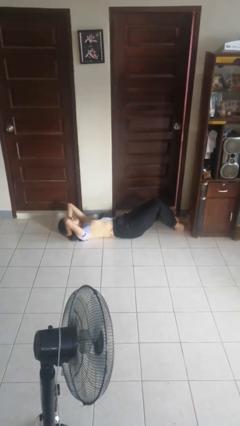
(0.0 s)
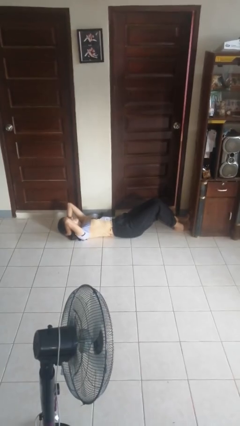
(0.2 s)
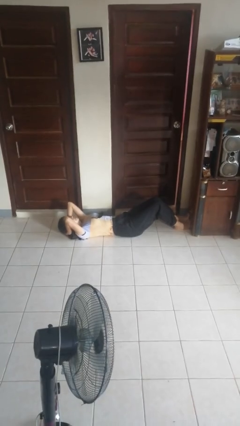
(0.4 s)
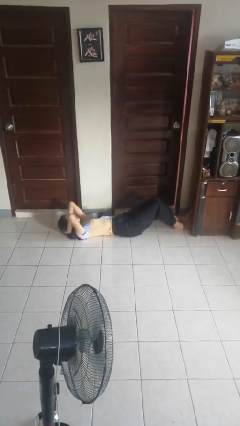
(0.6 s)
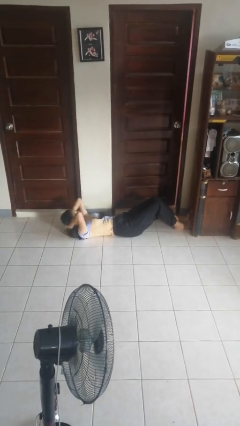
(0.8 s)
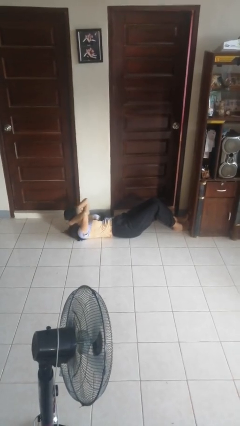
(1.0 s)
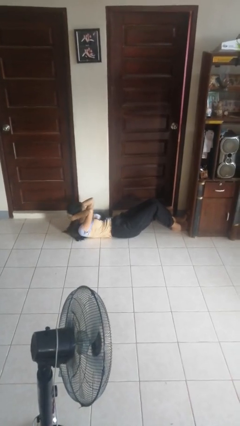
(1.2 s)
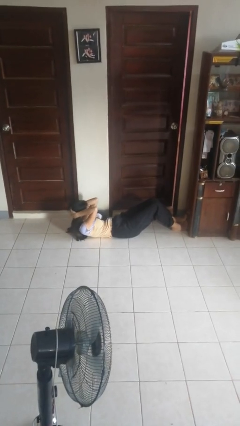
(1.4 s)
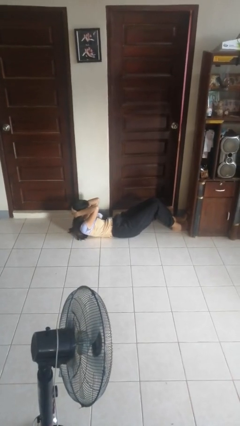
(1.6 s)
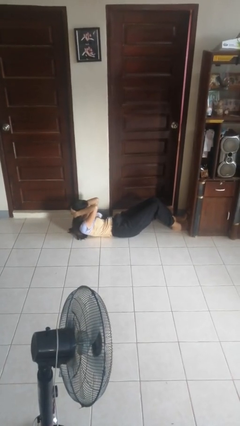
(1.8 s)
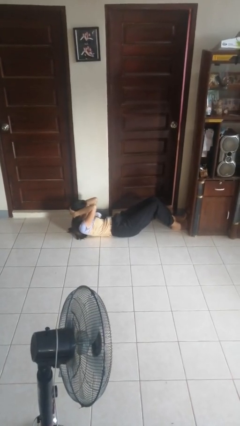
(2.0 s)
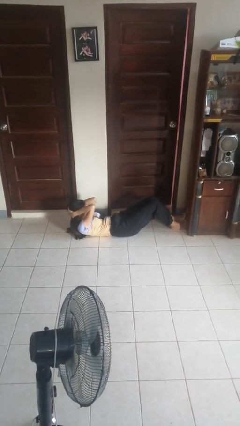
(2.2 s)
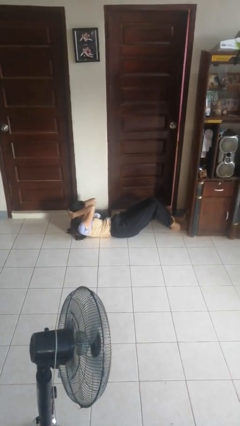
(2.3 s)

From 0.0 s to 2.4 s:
person exercises with situp

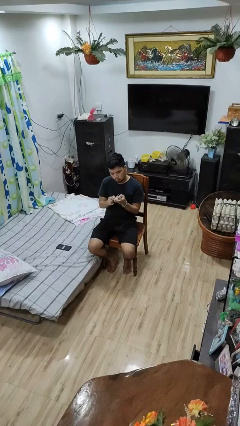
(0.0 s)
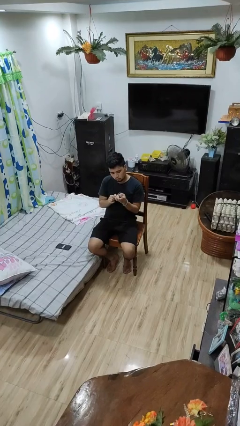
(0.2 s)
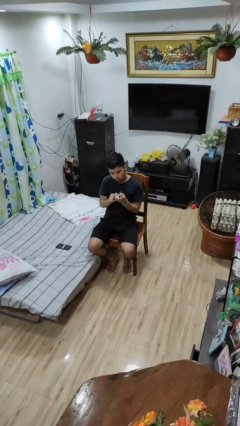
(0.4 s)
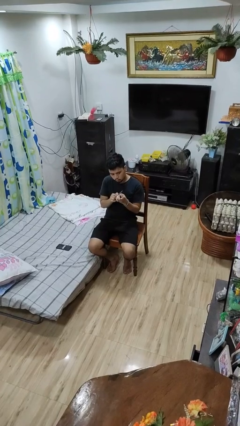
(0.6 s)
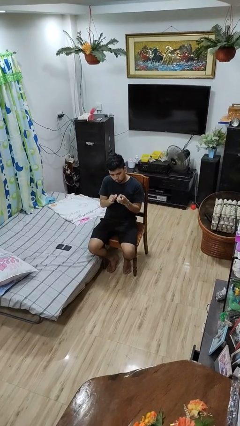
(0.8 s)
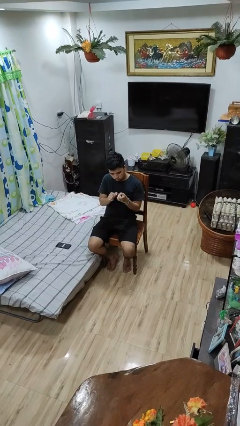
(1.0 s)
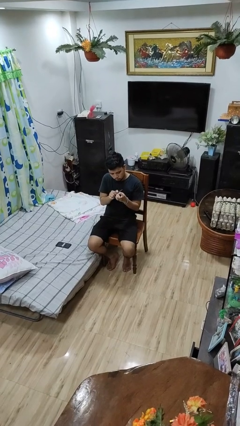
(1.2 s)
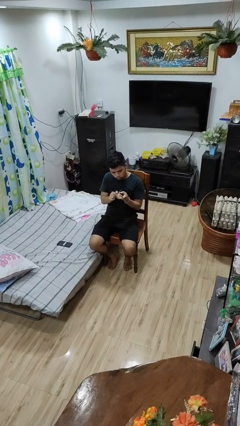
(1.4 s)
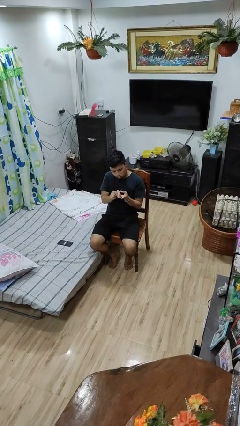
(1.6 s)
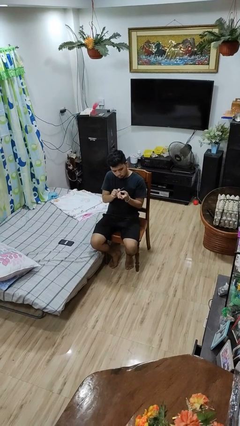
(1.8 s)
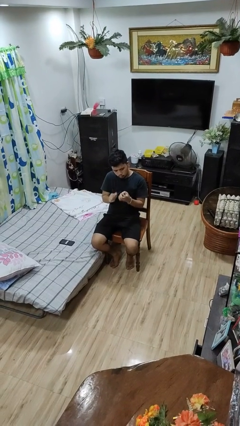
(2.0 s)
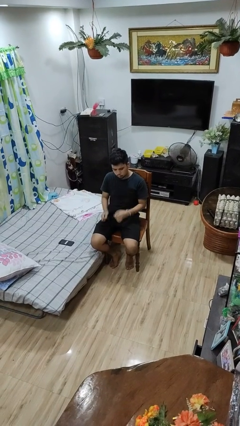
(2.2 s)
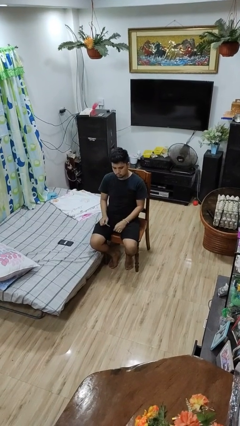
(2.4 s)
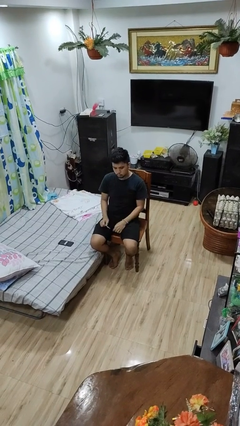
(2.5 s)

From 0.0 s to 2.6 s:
person files fingernails

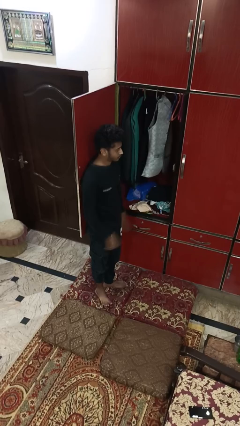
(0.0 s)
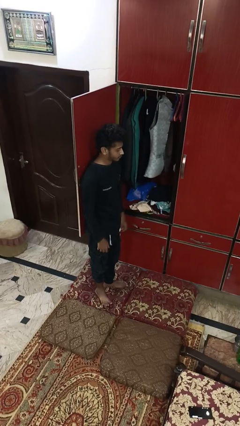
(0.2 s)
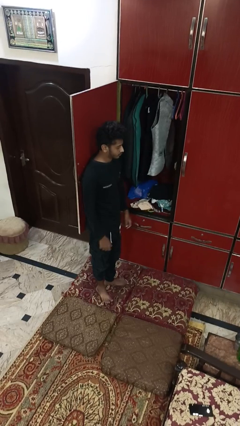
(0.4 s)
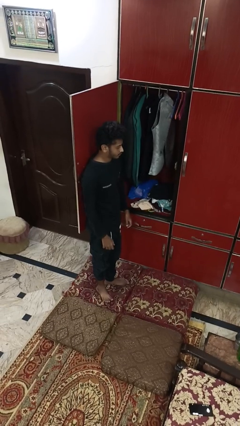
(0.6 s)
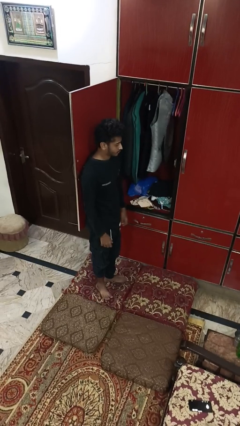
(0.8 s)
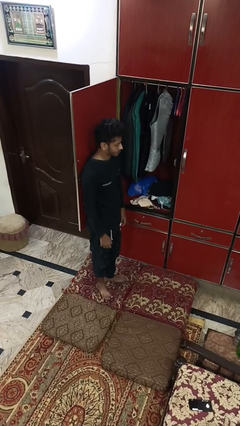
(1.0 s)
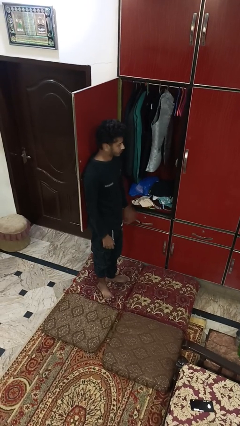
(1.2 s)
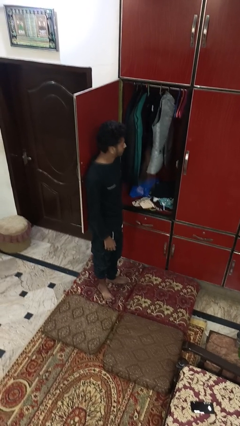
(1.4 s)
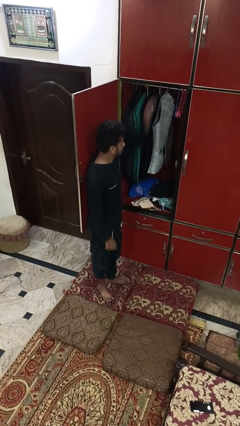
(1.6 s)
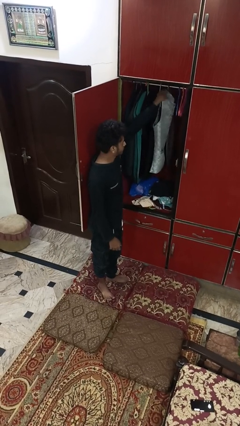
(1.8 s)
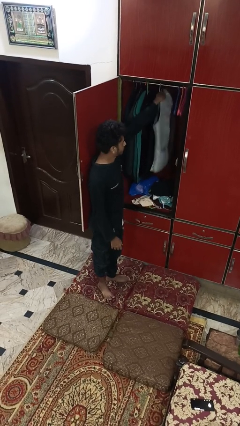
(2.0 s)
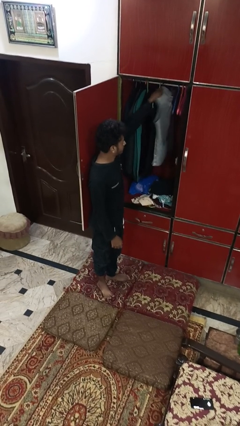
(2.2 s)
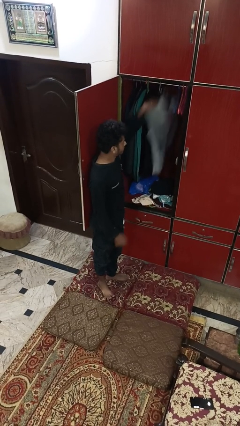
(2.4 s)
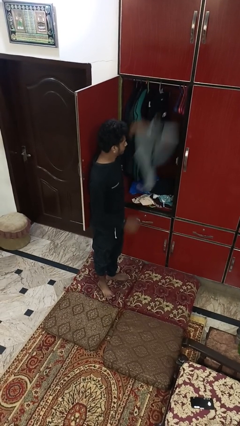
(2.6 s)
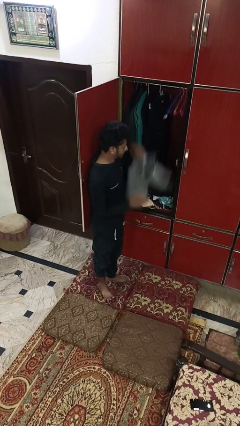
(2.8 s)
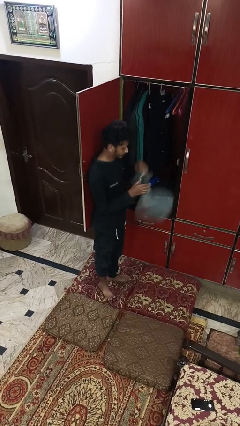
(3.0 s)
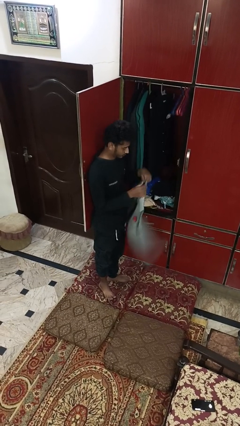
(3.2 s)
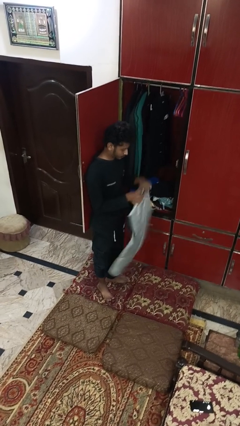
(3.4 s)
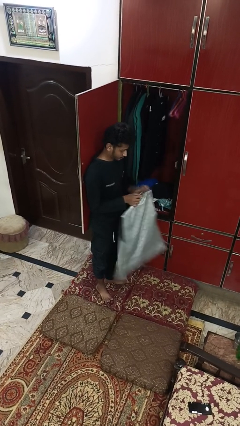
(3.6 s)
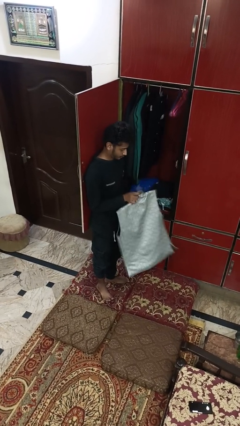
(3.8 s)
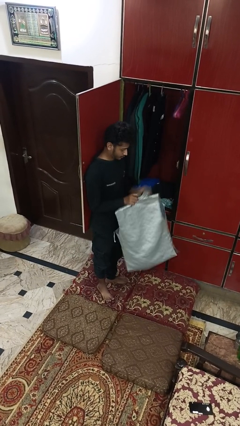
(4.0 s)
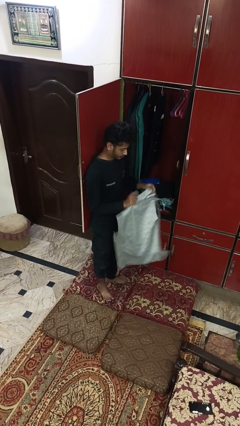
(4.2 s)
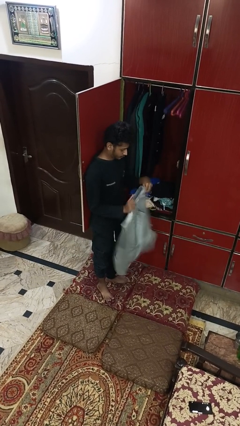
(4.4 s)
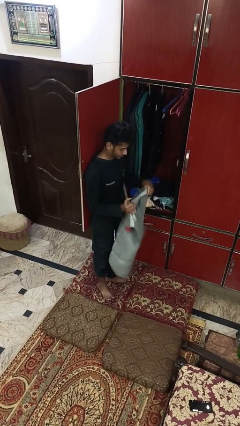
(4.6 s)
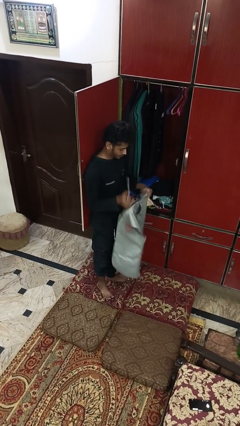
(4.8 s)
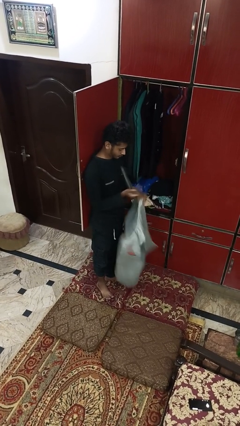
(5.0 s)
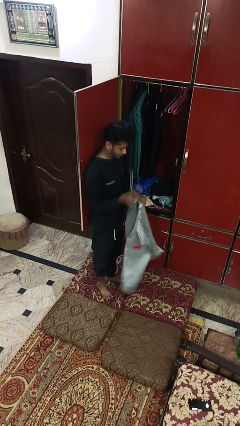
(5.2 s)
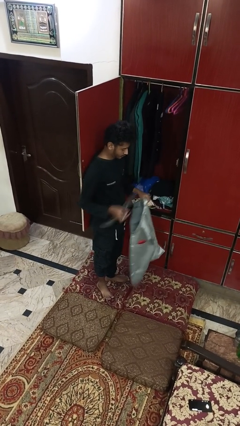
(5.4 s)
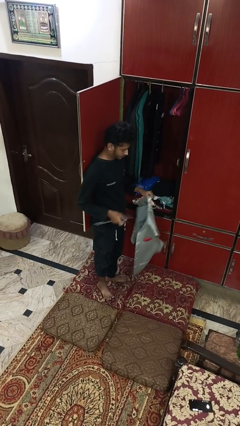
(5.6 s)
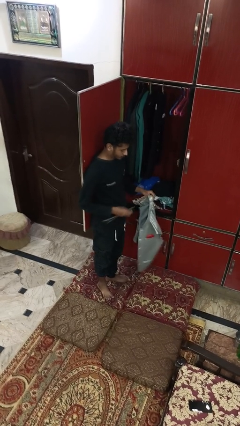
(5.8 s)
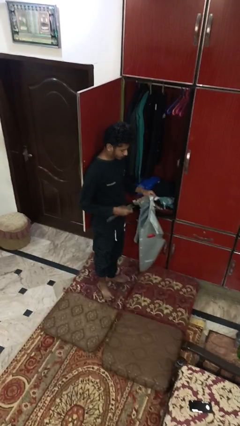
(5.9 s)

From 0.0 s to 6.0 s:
person takes clothes from closet

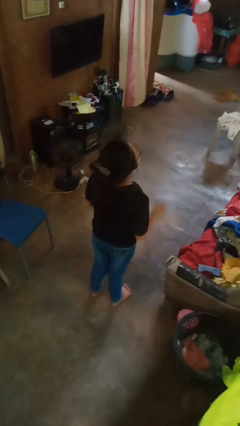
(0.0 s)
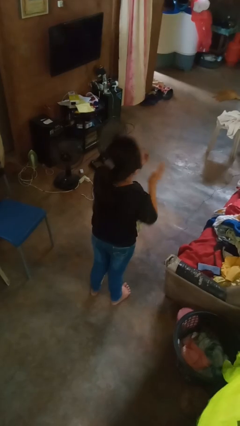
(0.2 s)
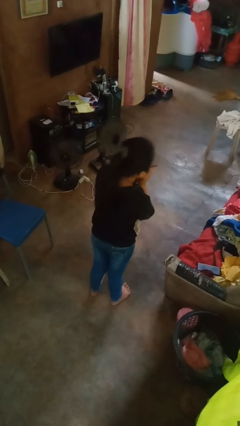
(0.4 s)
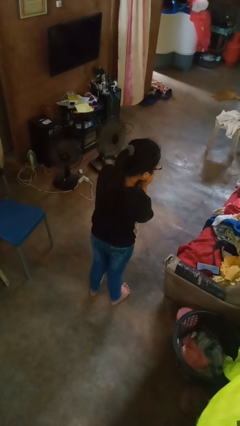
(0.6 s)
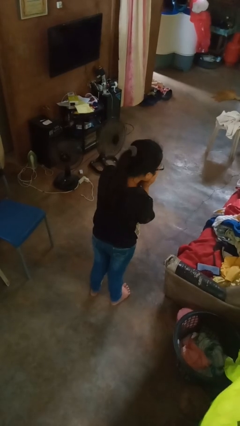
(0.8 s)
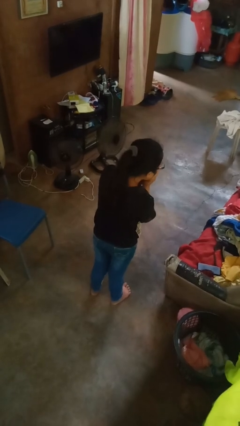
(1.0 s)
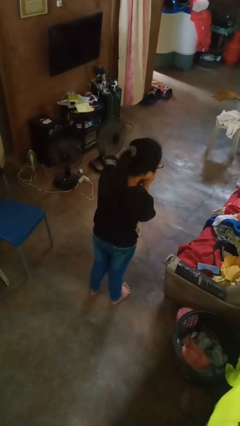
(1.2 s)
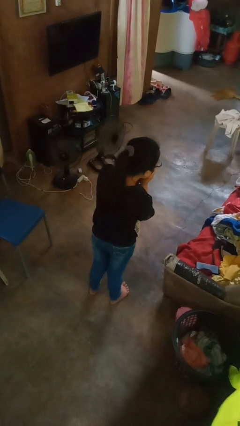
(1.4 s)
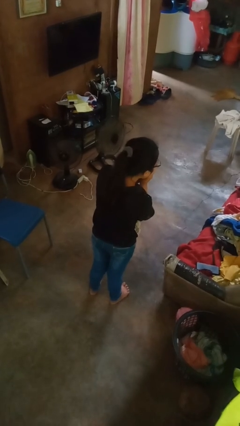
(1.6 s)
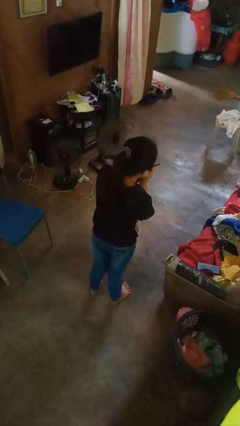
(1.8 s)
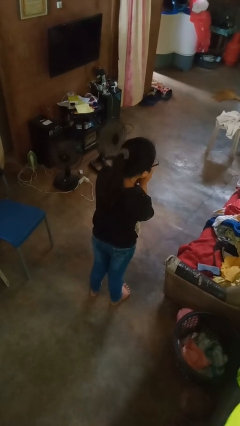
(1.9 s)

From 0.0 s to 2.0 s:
person sneezes into hand

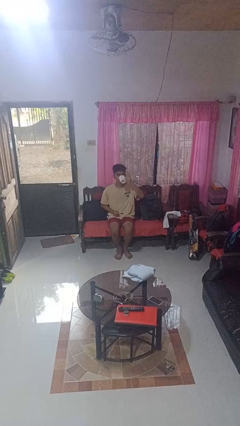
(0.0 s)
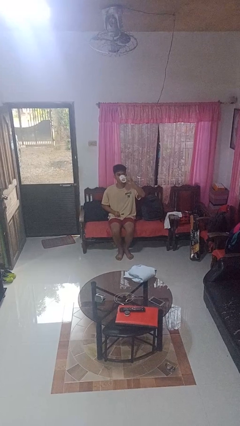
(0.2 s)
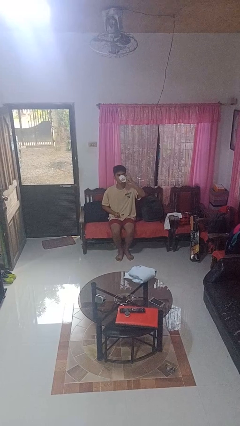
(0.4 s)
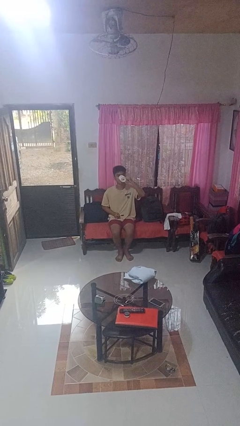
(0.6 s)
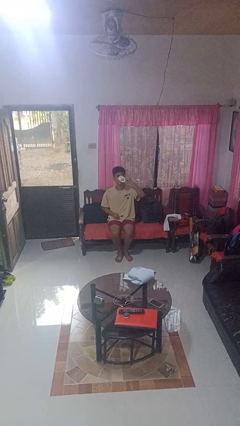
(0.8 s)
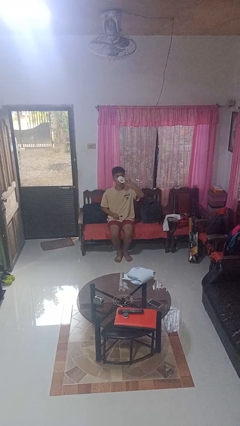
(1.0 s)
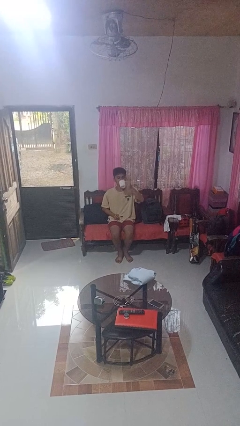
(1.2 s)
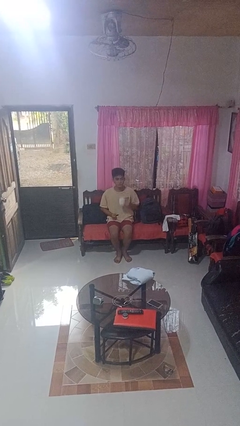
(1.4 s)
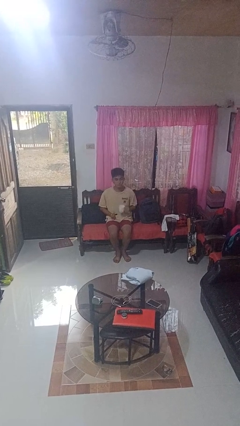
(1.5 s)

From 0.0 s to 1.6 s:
person drinks from mug

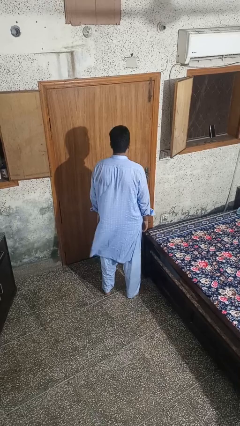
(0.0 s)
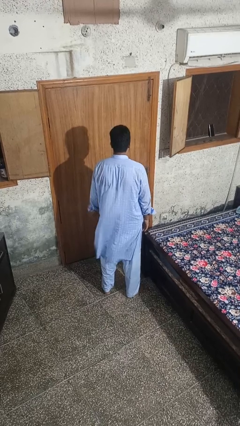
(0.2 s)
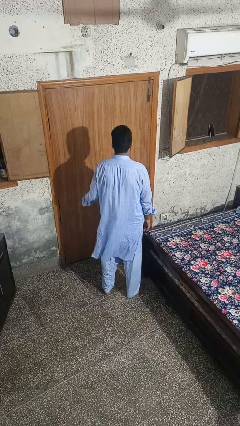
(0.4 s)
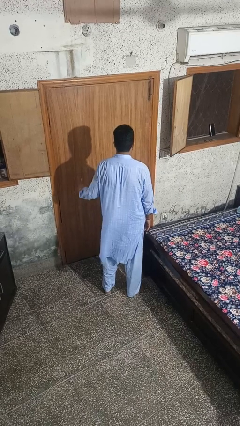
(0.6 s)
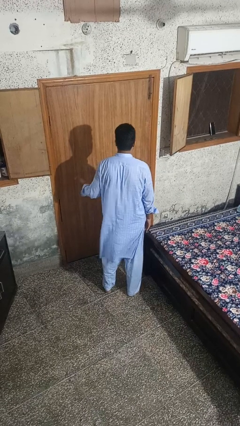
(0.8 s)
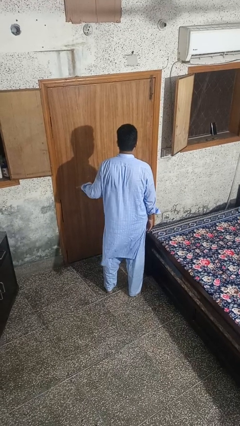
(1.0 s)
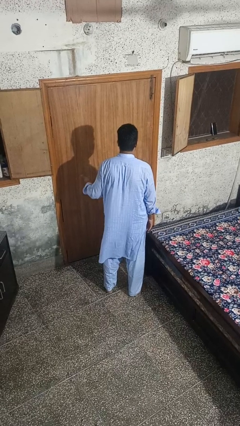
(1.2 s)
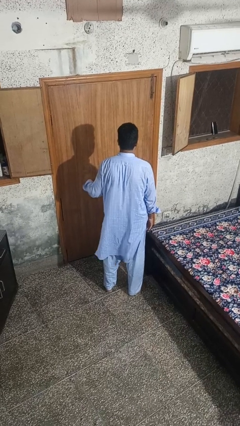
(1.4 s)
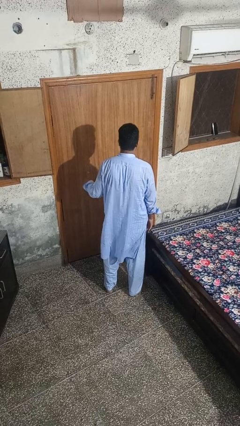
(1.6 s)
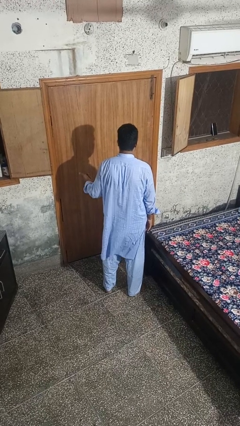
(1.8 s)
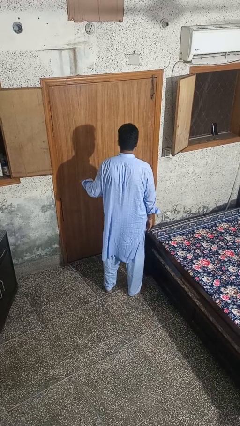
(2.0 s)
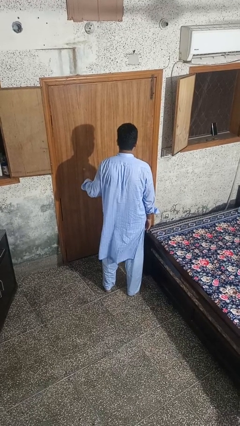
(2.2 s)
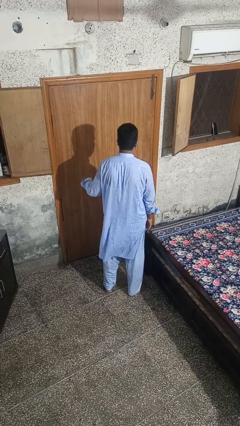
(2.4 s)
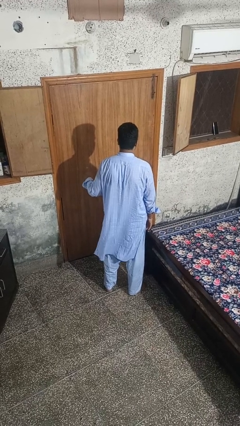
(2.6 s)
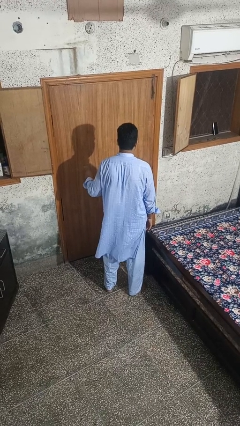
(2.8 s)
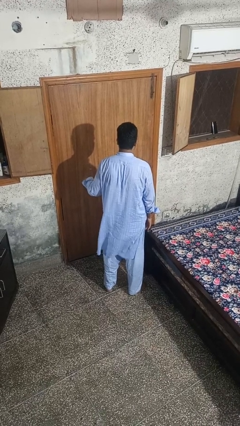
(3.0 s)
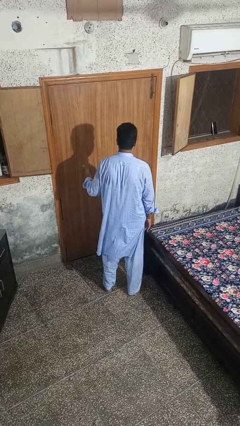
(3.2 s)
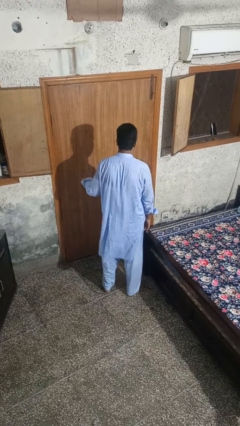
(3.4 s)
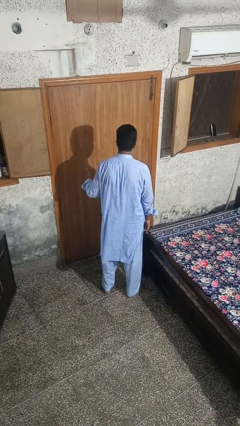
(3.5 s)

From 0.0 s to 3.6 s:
person gestures hang loose
